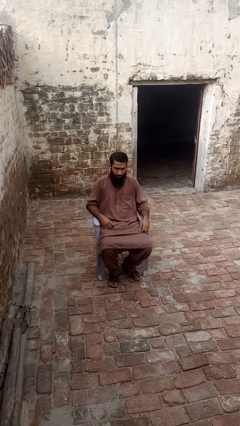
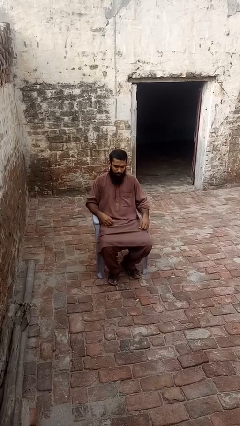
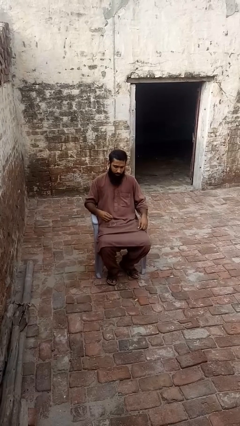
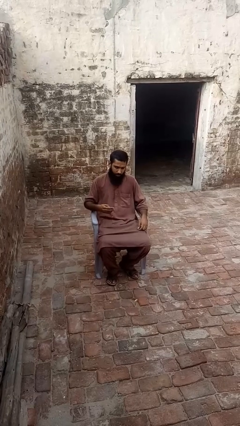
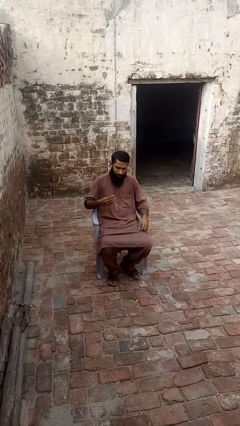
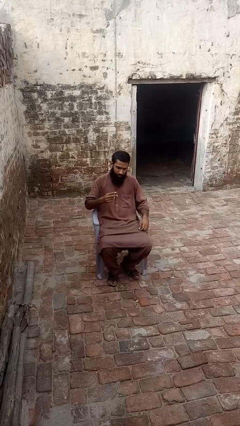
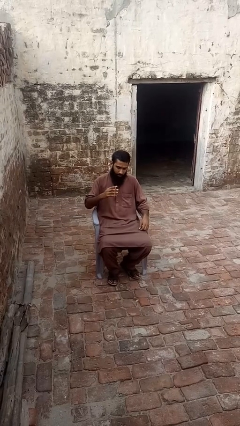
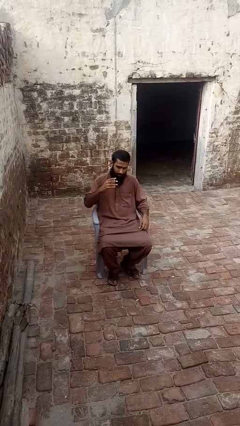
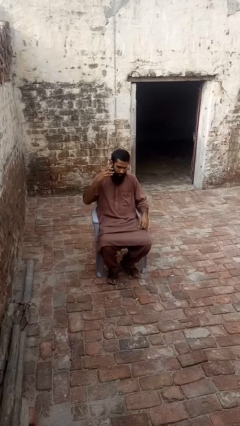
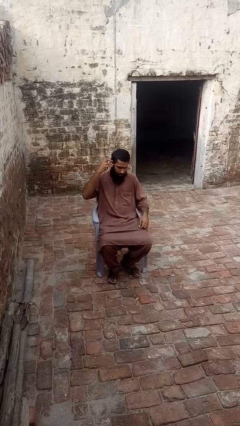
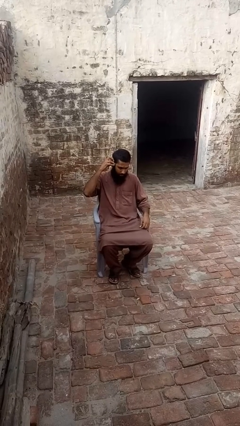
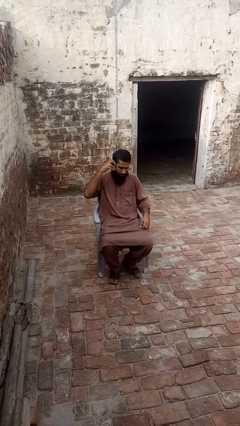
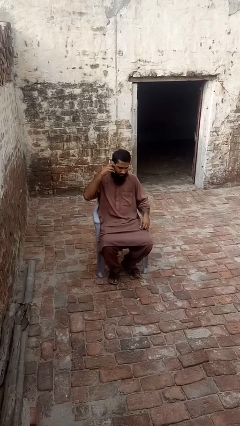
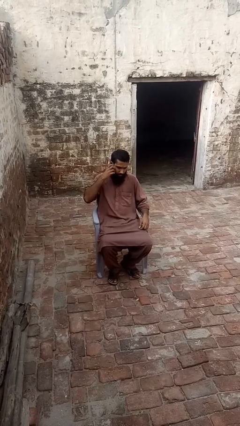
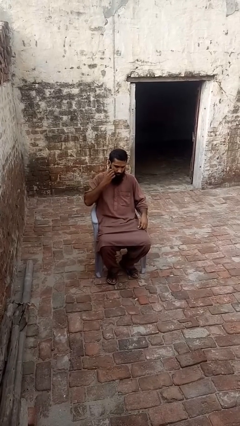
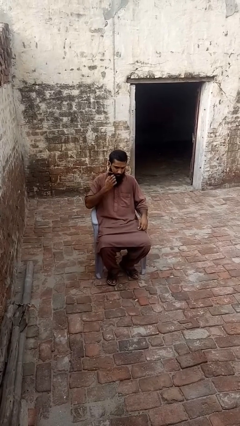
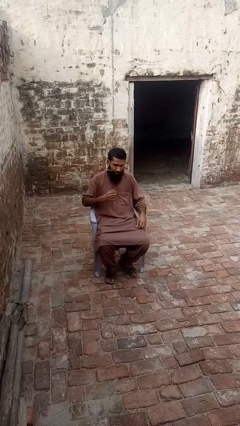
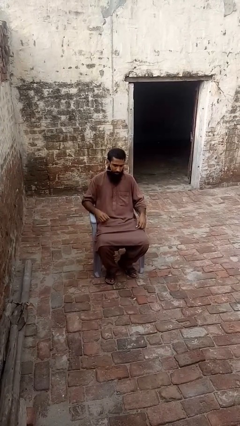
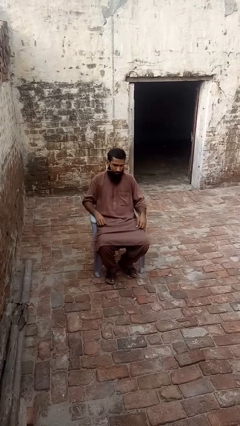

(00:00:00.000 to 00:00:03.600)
person puts on earrings

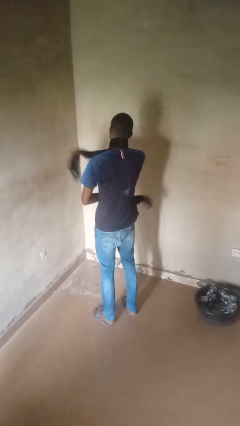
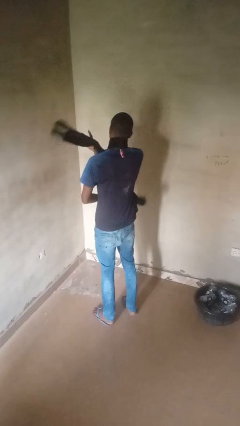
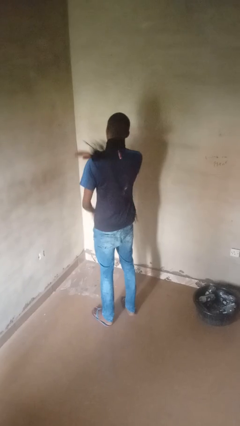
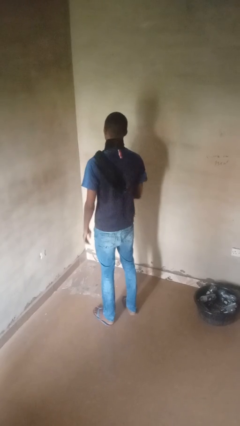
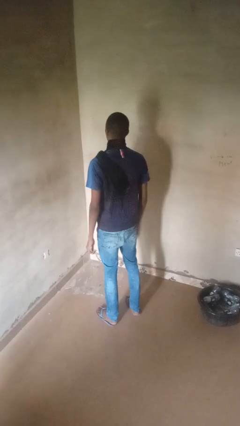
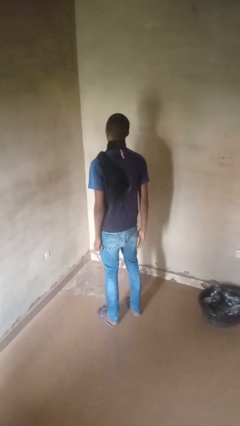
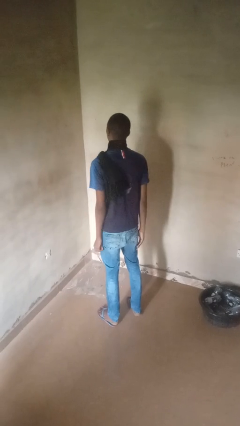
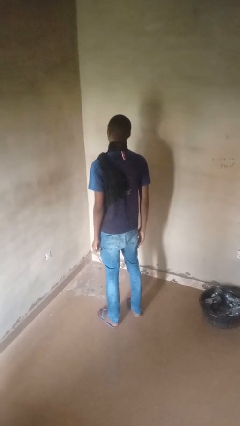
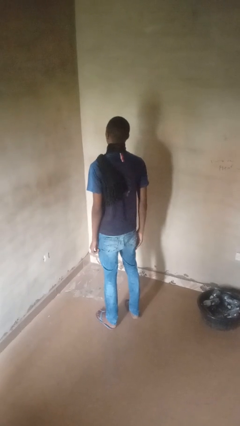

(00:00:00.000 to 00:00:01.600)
person puts on scarf

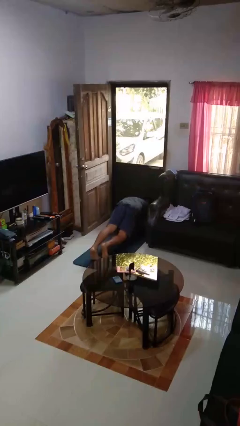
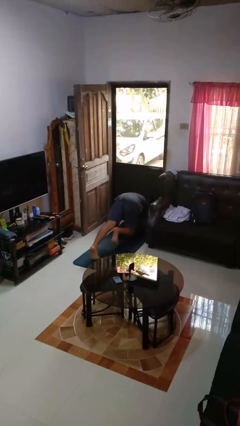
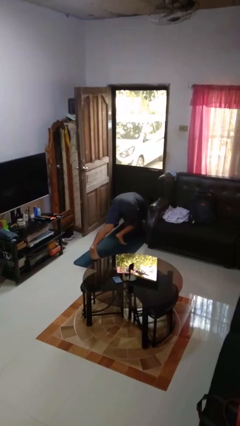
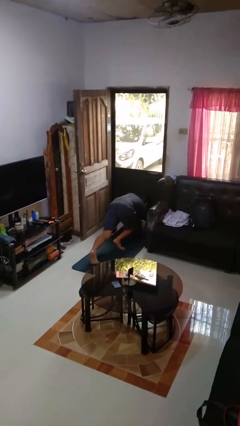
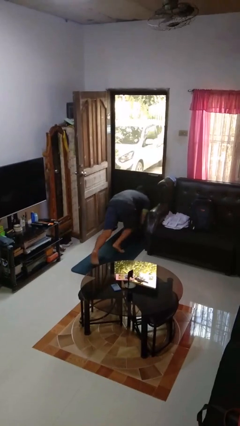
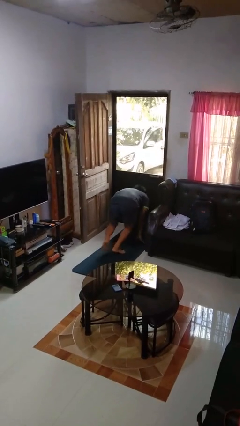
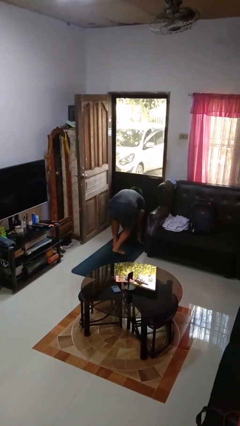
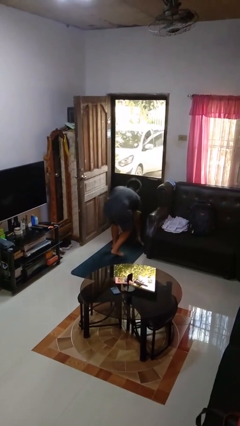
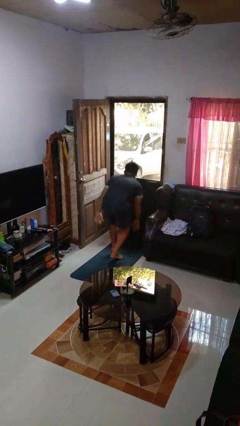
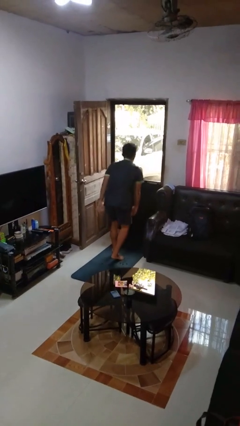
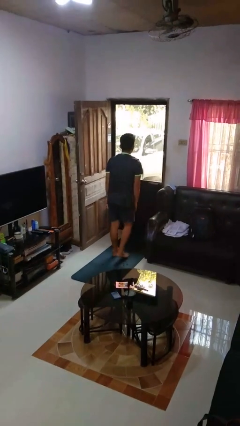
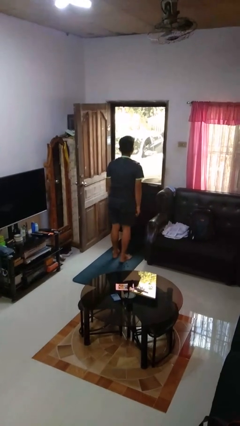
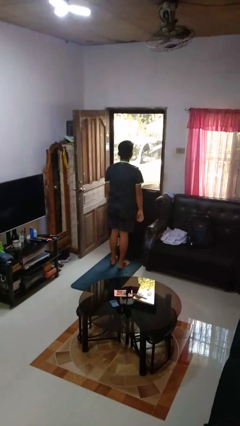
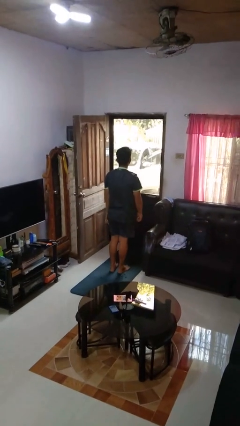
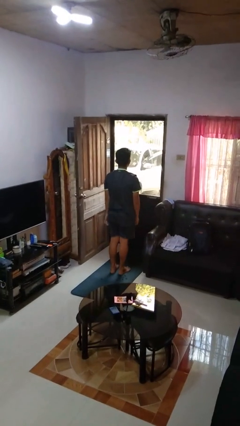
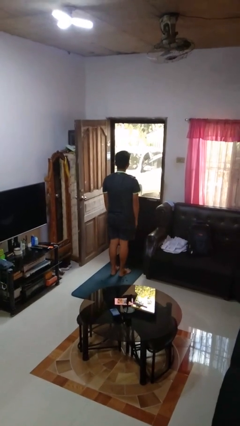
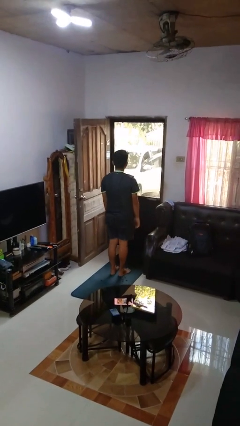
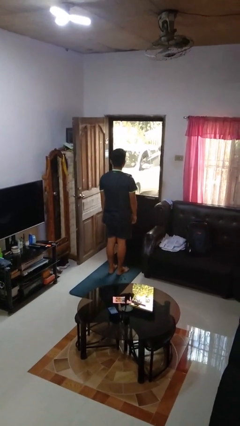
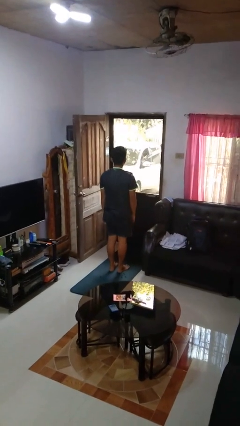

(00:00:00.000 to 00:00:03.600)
person stands up from floor

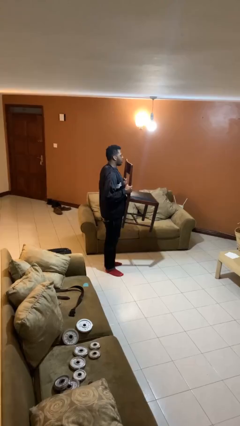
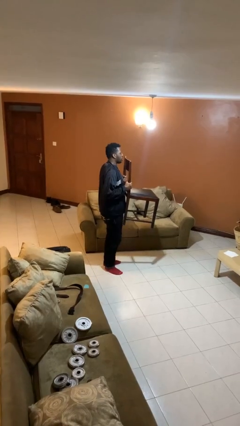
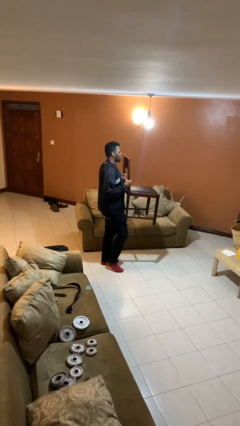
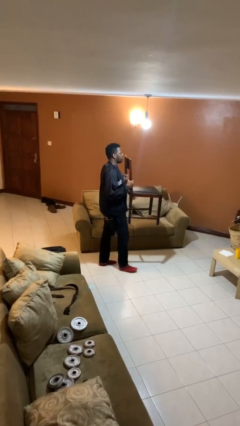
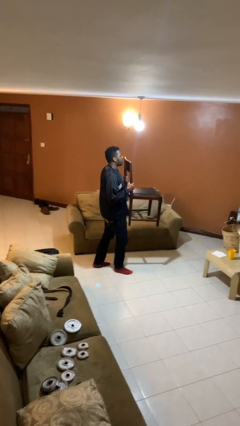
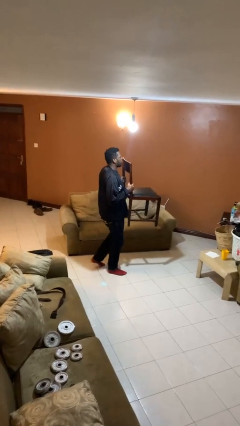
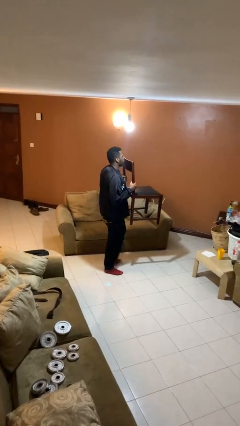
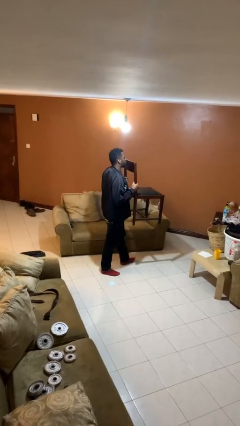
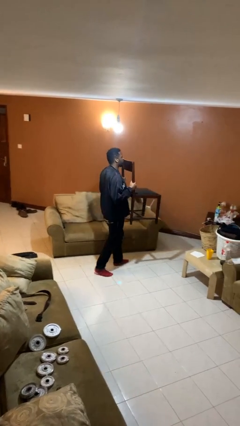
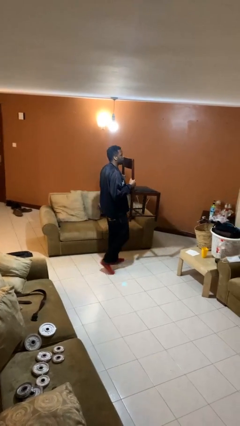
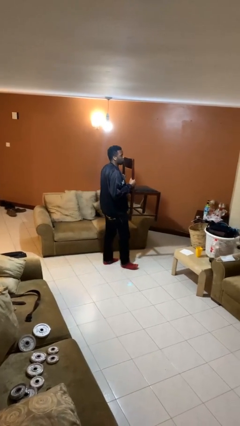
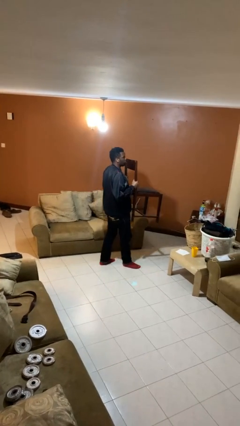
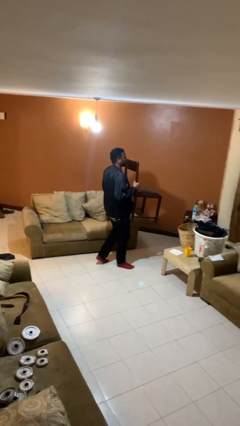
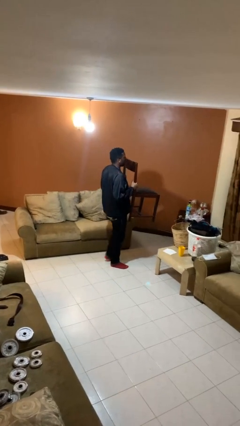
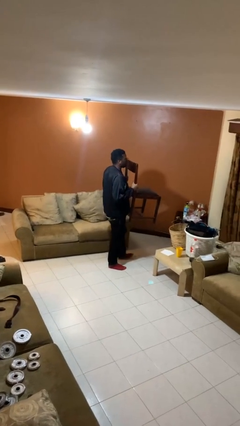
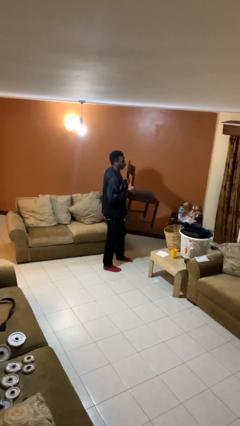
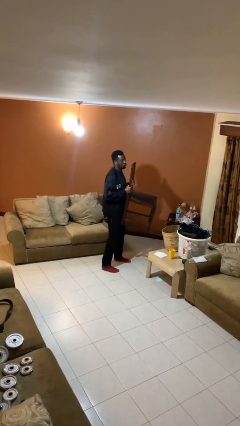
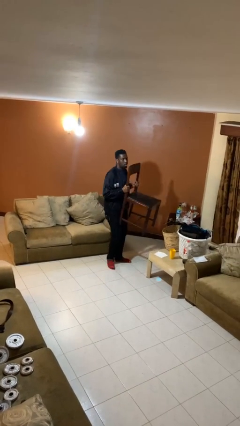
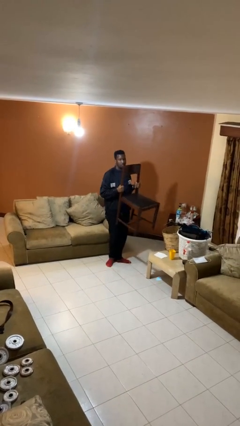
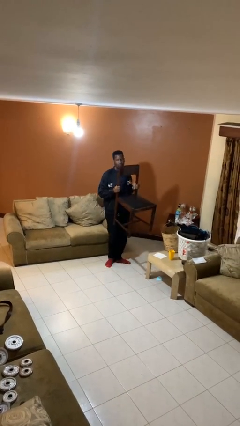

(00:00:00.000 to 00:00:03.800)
person carries furniture

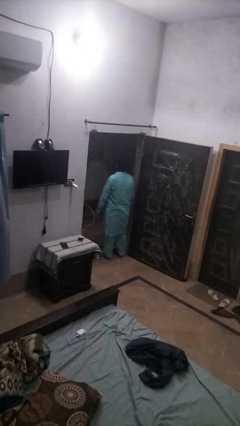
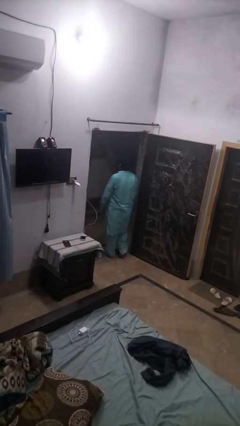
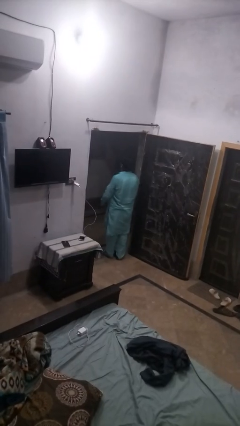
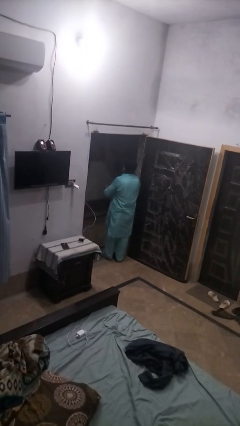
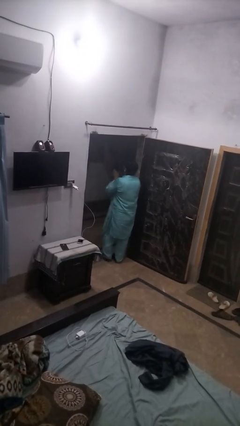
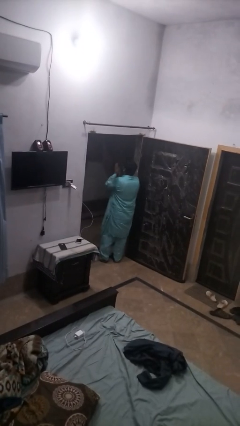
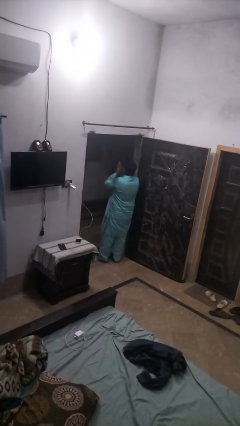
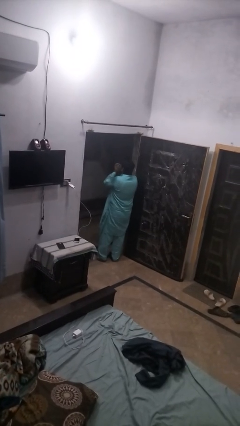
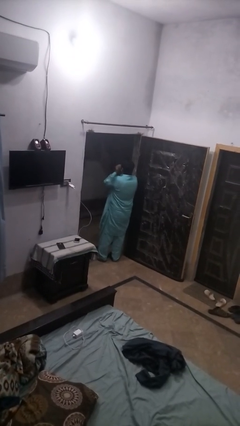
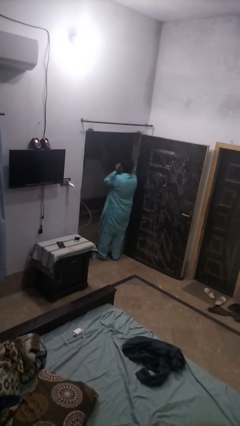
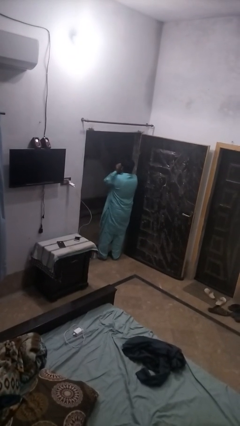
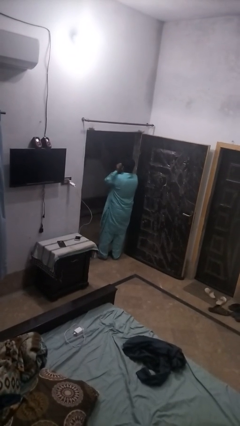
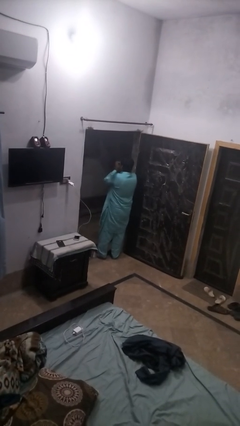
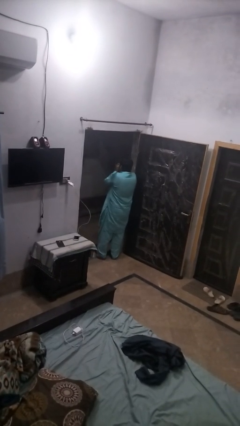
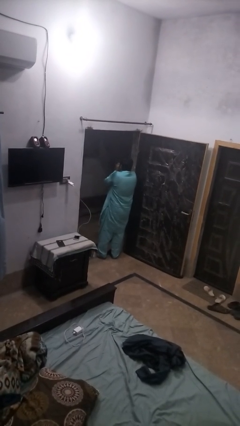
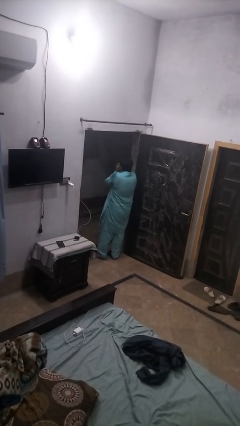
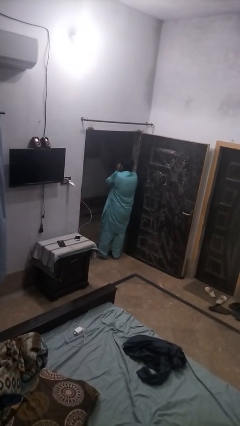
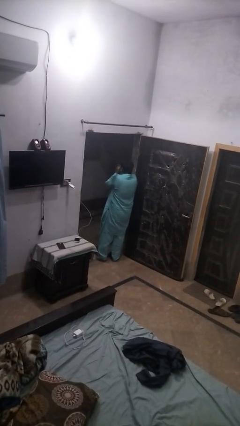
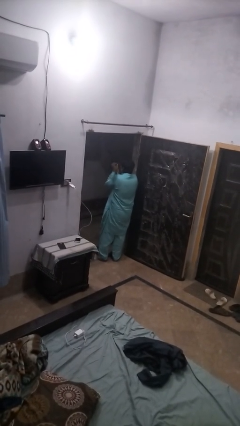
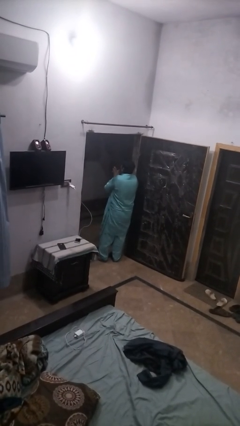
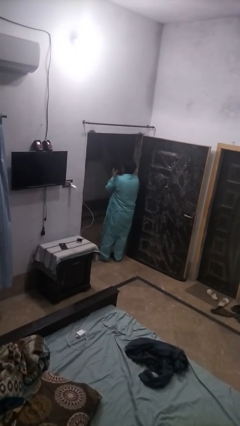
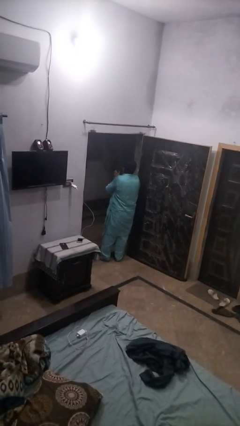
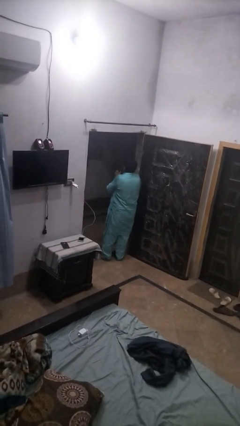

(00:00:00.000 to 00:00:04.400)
person blows into hands

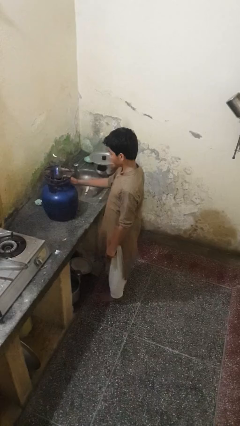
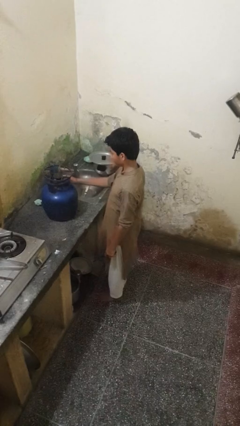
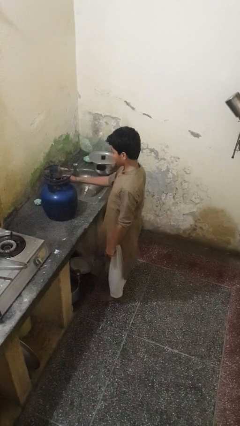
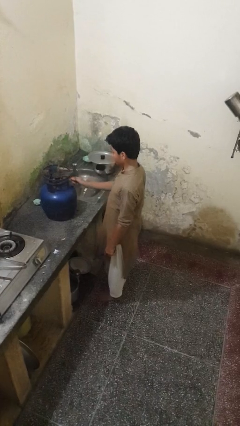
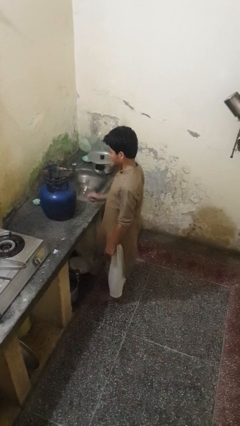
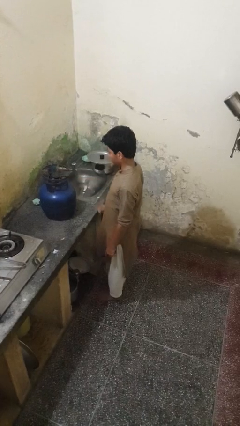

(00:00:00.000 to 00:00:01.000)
person turns off stovetop
